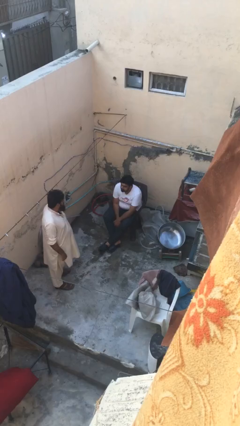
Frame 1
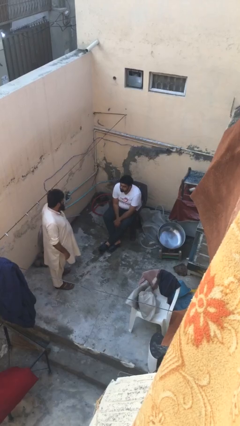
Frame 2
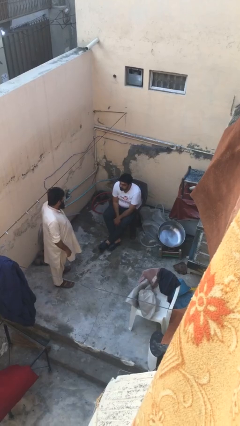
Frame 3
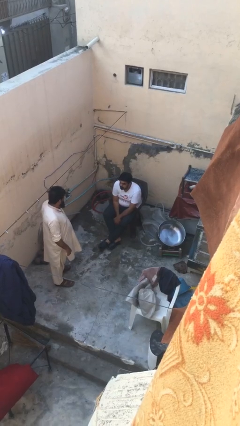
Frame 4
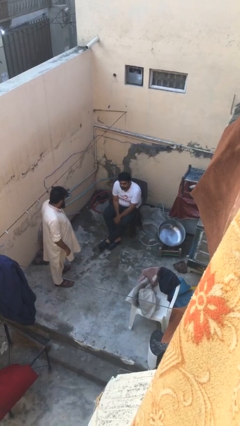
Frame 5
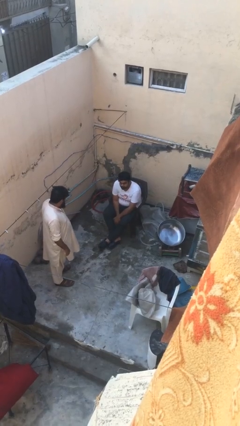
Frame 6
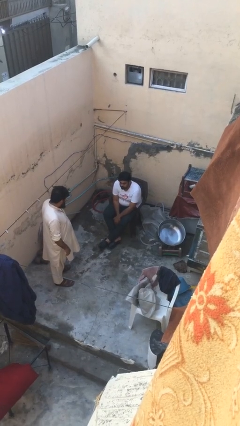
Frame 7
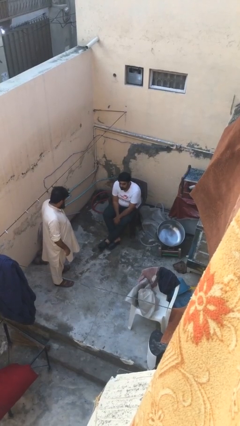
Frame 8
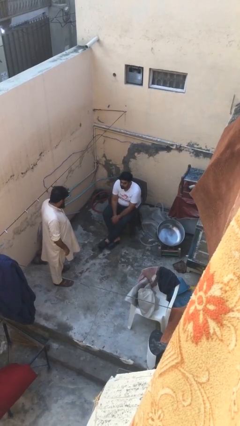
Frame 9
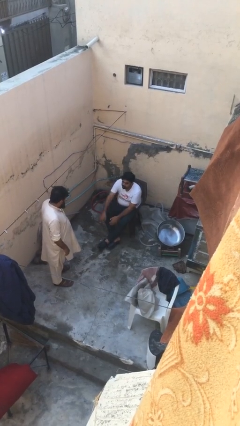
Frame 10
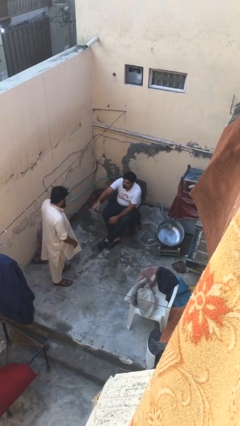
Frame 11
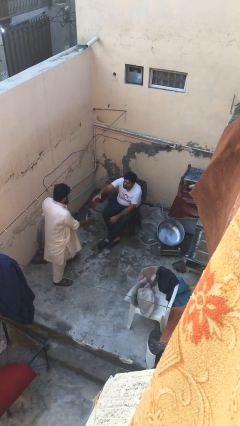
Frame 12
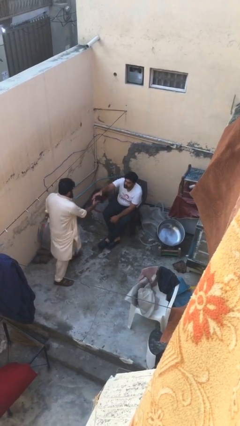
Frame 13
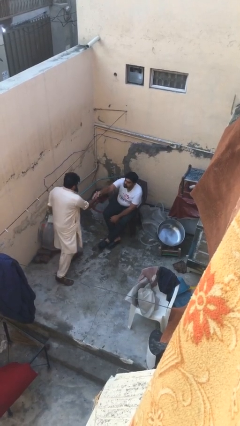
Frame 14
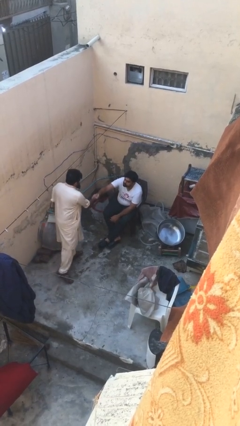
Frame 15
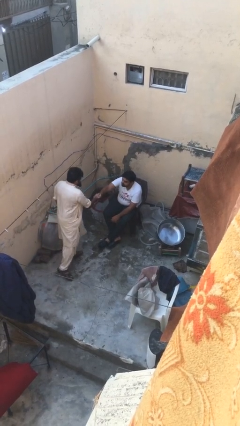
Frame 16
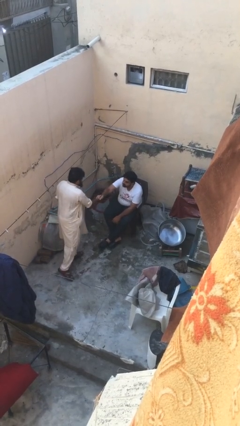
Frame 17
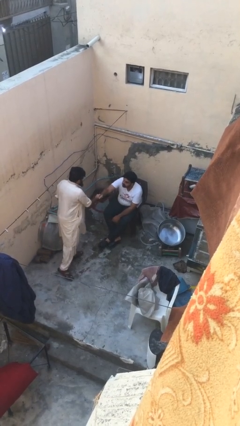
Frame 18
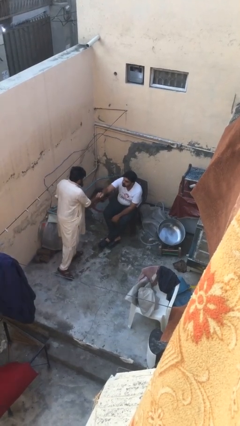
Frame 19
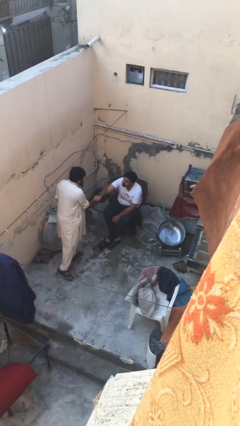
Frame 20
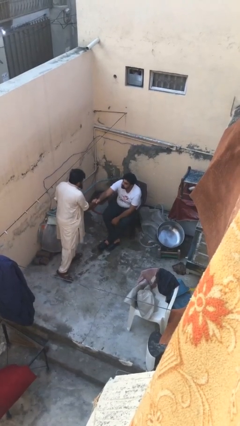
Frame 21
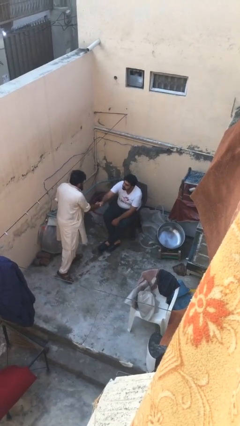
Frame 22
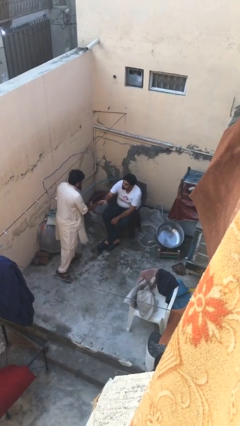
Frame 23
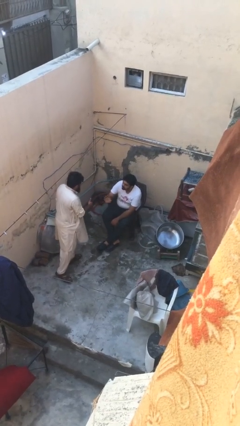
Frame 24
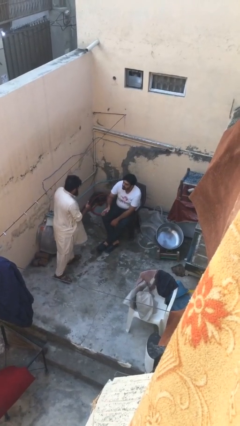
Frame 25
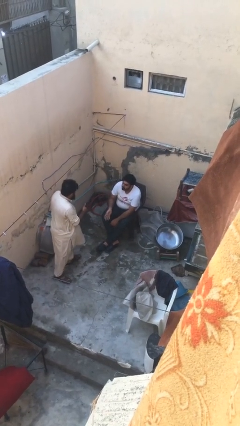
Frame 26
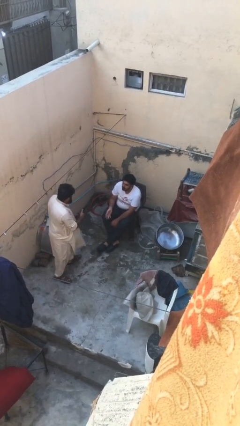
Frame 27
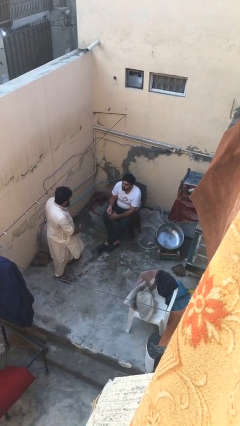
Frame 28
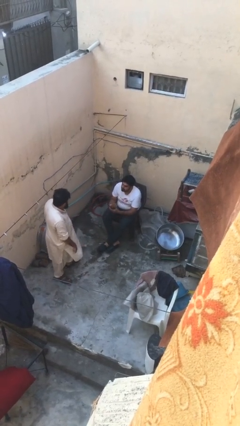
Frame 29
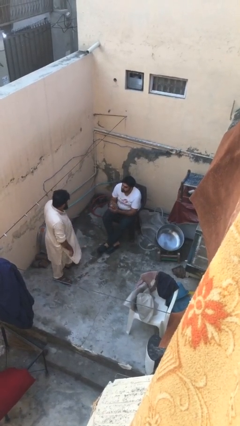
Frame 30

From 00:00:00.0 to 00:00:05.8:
person shakes hand

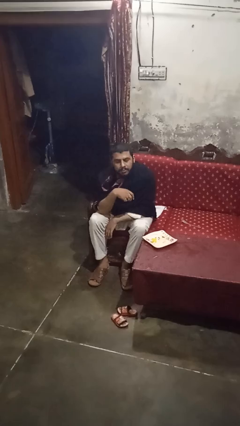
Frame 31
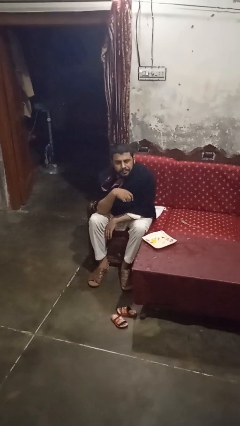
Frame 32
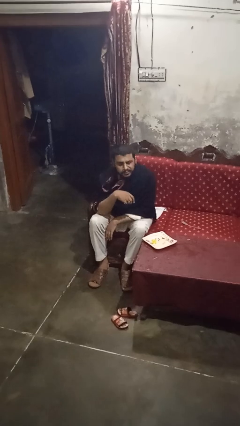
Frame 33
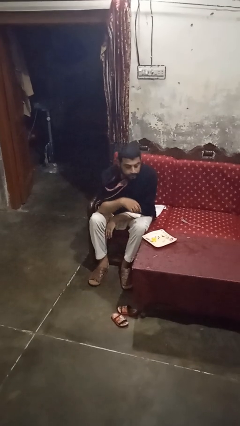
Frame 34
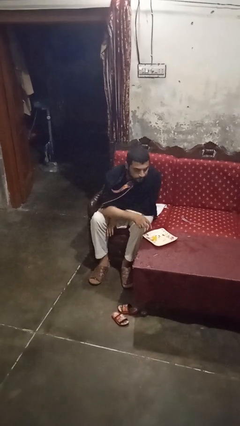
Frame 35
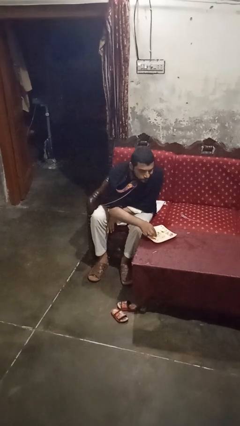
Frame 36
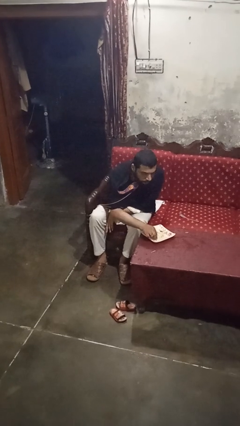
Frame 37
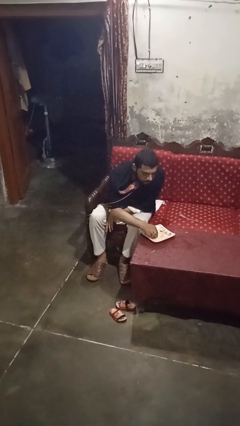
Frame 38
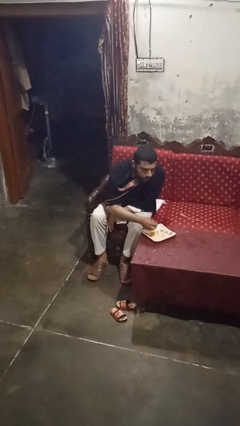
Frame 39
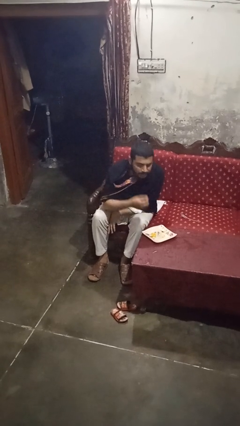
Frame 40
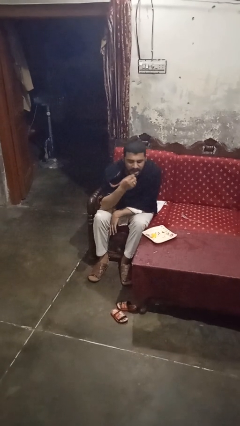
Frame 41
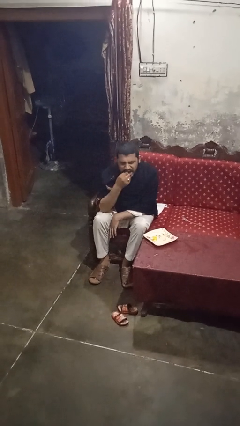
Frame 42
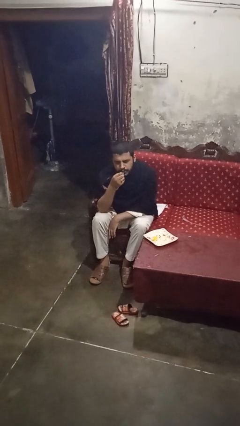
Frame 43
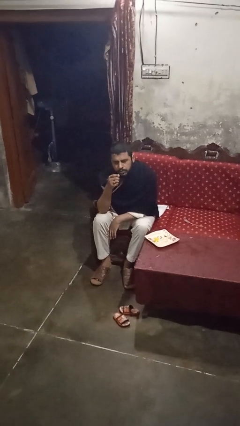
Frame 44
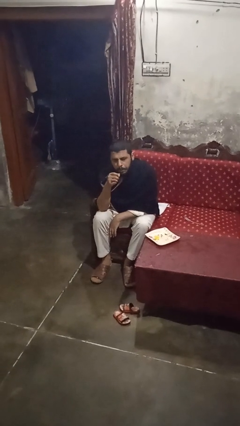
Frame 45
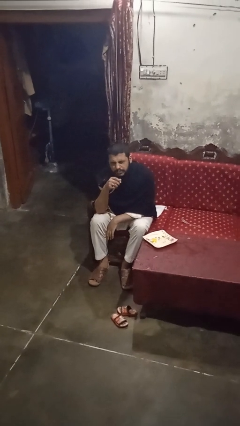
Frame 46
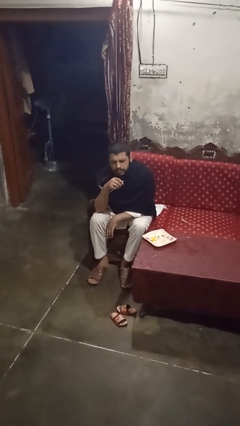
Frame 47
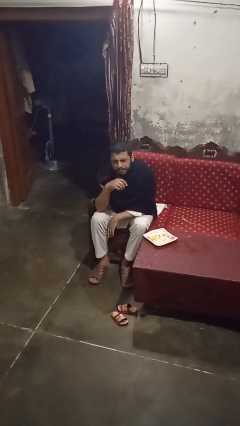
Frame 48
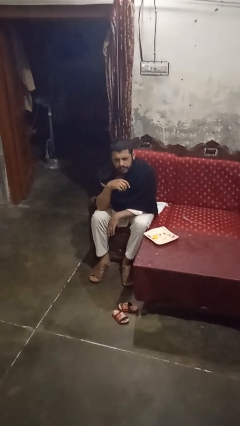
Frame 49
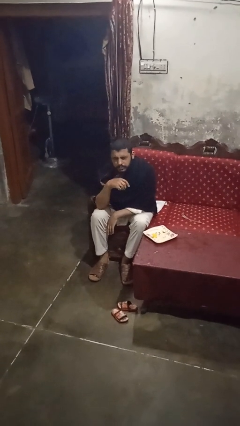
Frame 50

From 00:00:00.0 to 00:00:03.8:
person eats with hands

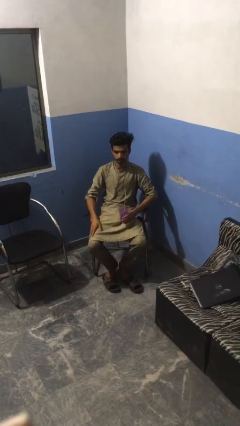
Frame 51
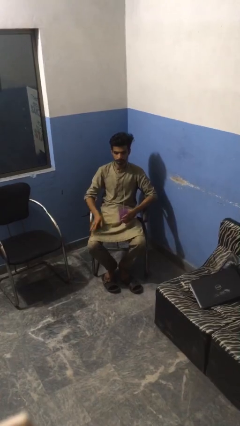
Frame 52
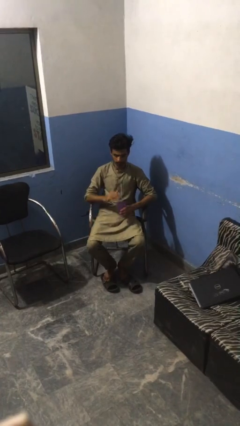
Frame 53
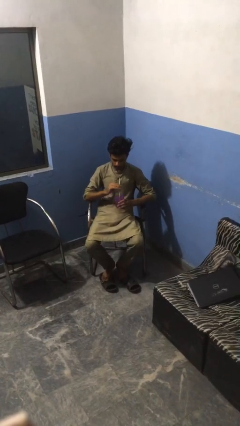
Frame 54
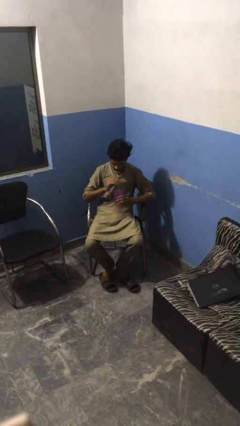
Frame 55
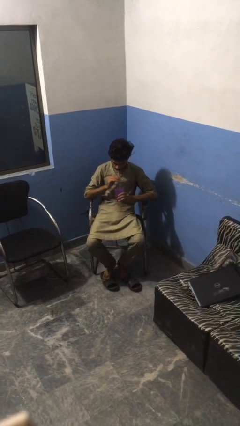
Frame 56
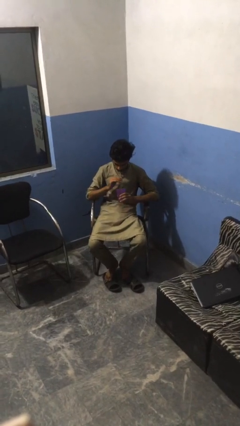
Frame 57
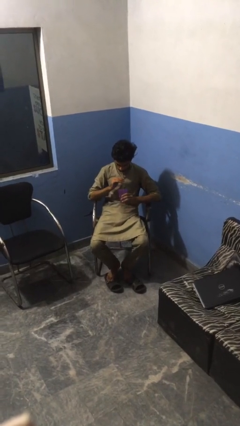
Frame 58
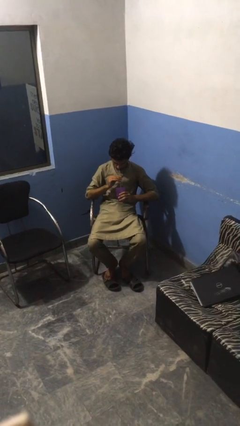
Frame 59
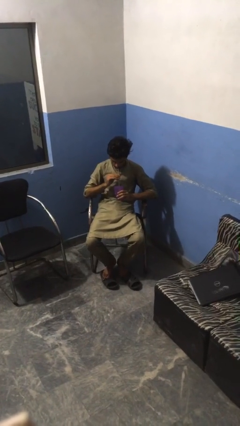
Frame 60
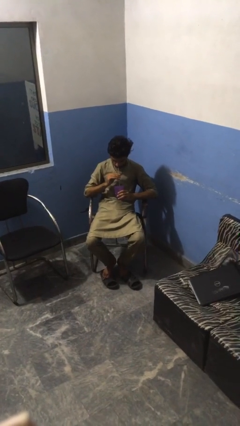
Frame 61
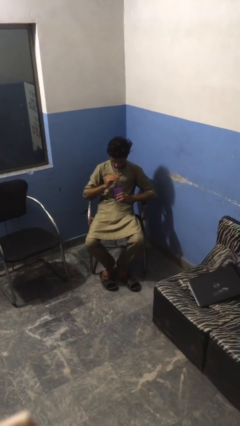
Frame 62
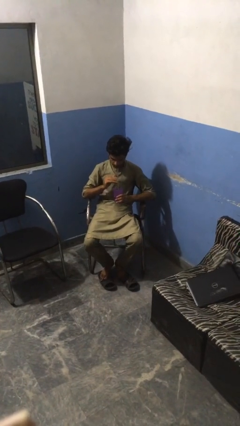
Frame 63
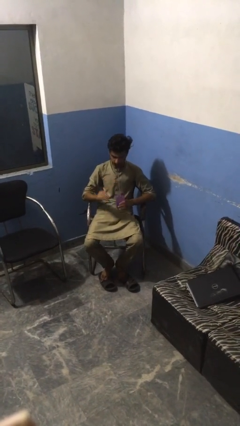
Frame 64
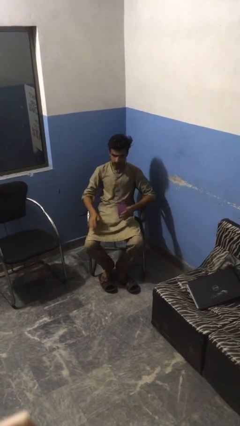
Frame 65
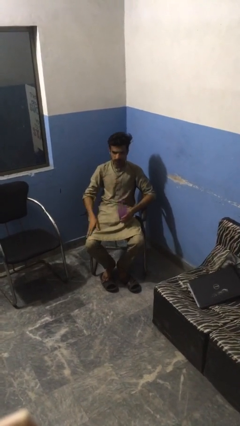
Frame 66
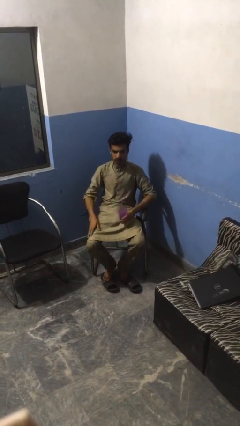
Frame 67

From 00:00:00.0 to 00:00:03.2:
person drinks from straw

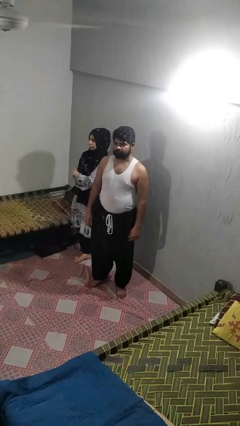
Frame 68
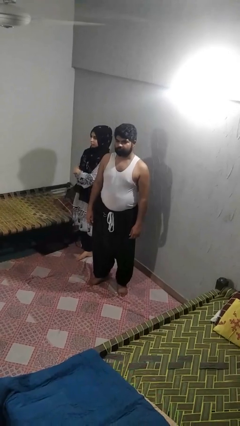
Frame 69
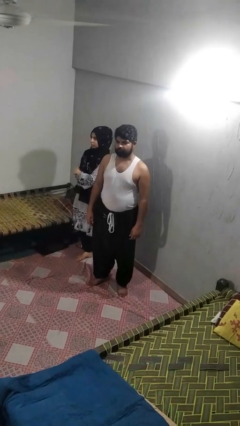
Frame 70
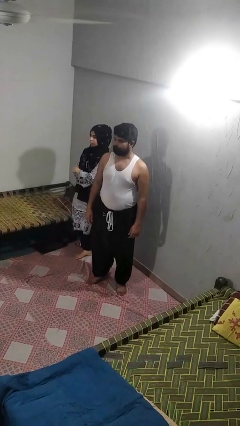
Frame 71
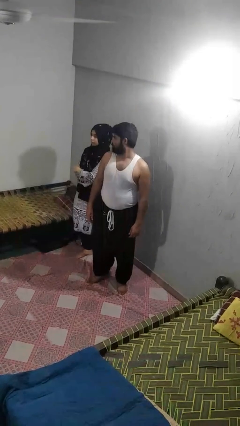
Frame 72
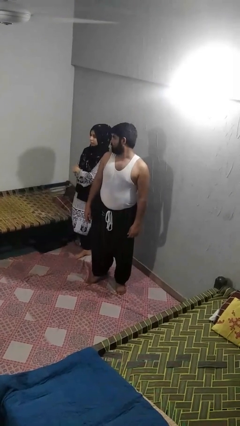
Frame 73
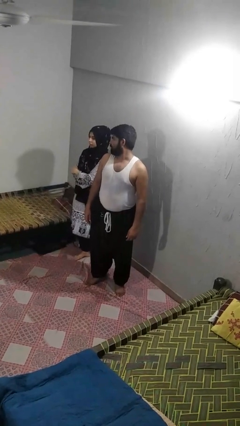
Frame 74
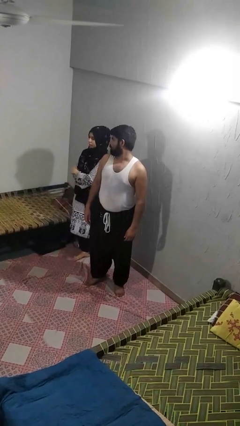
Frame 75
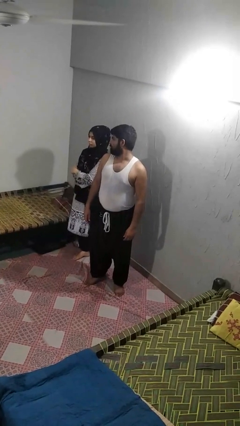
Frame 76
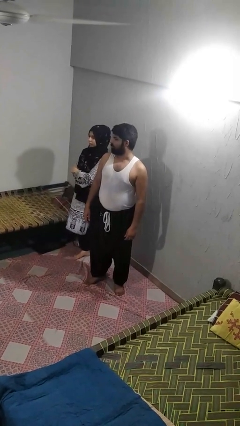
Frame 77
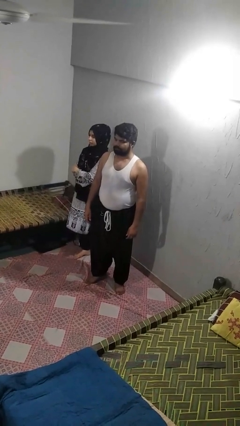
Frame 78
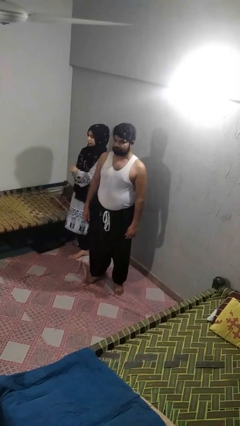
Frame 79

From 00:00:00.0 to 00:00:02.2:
person looks over shoulder

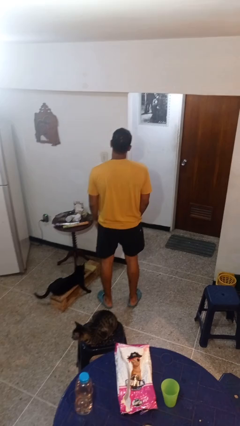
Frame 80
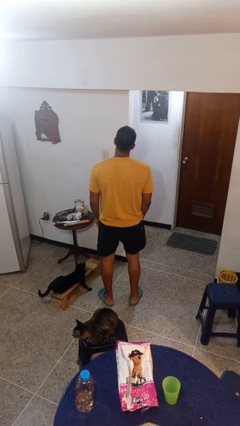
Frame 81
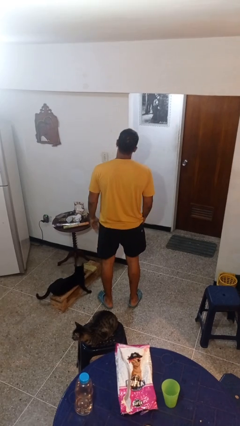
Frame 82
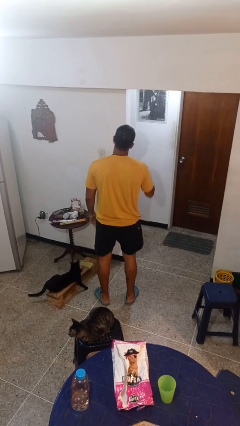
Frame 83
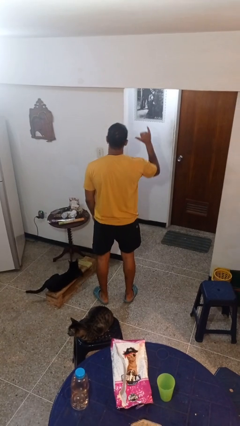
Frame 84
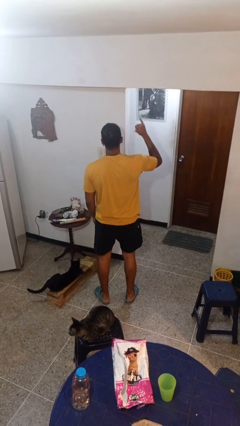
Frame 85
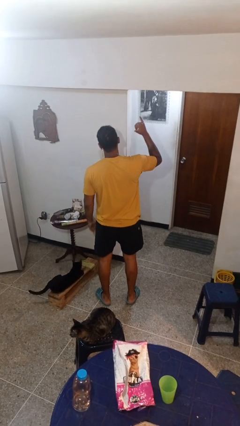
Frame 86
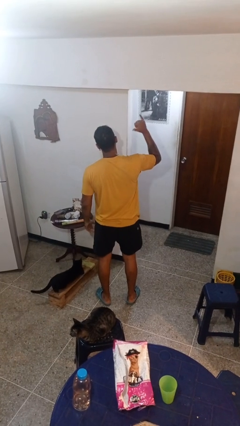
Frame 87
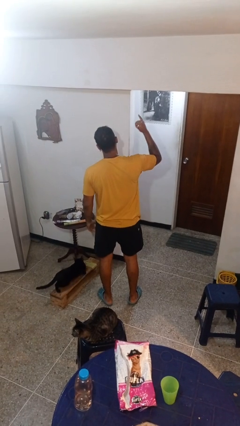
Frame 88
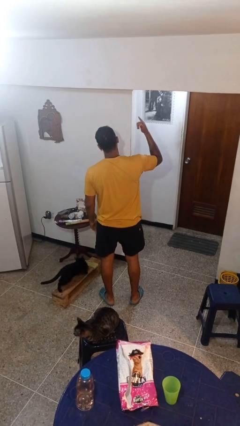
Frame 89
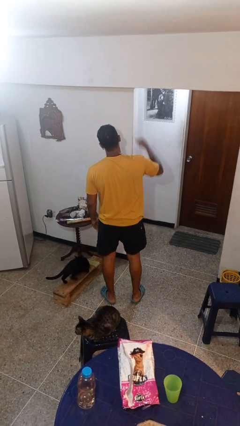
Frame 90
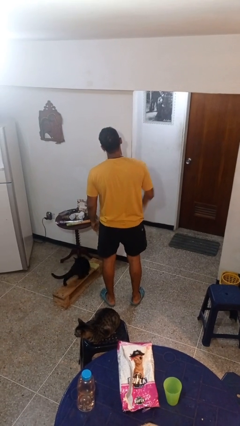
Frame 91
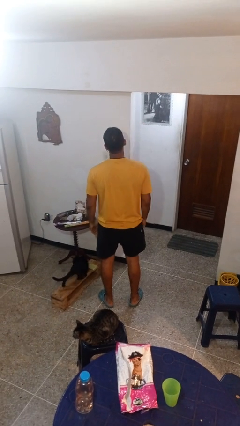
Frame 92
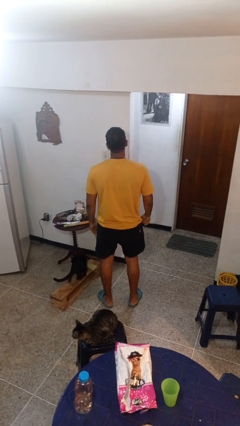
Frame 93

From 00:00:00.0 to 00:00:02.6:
person gestures hang loose
